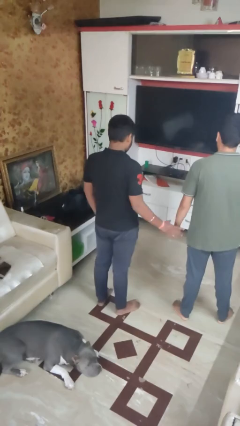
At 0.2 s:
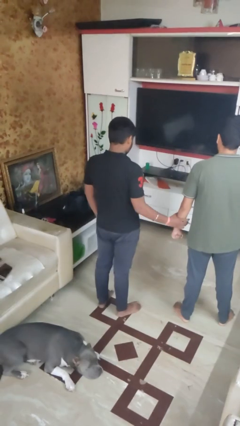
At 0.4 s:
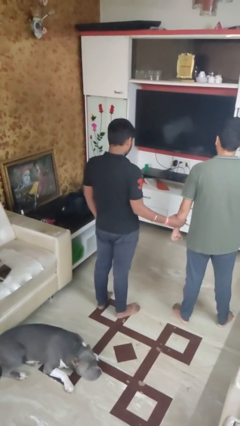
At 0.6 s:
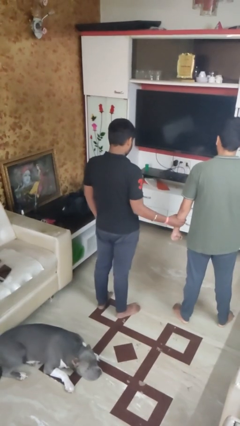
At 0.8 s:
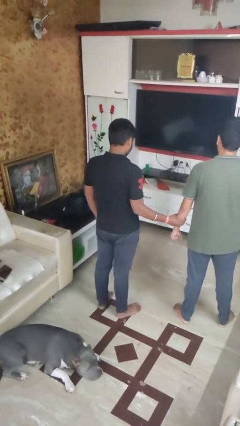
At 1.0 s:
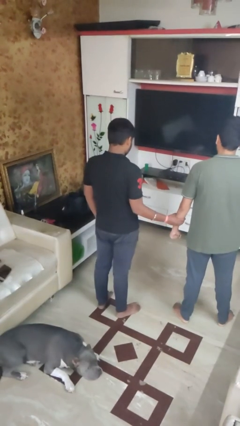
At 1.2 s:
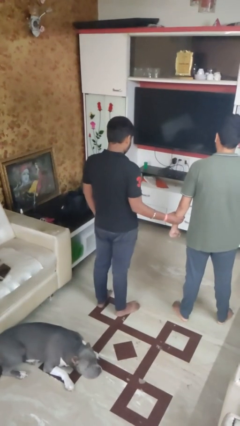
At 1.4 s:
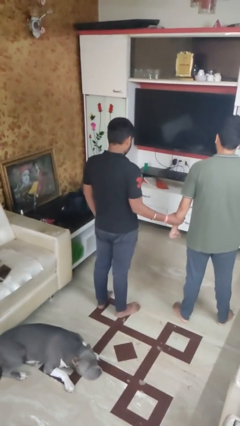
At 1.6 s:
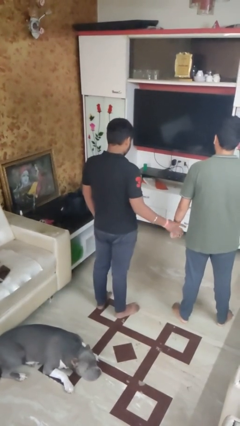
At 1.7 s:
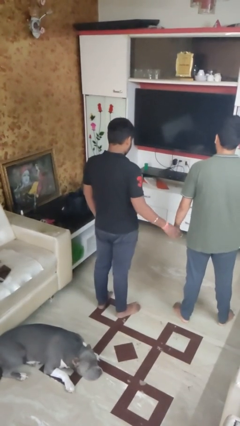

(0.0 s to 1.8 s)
person grabs person by forearm

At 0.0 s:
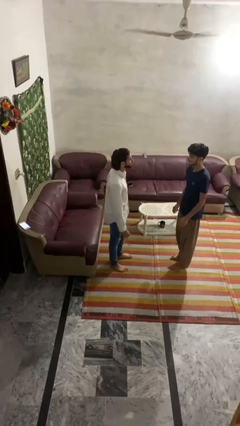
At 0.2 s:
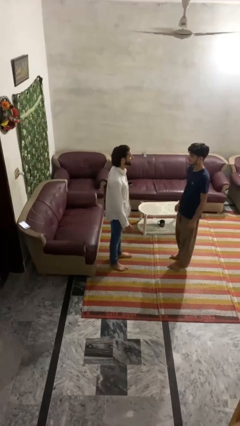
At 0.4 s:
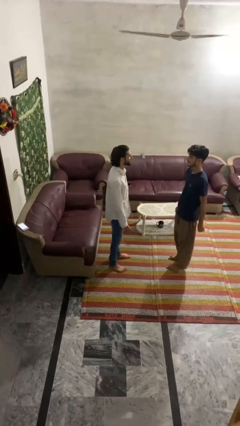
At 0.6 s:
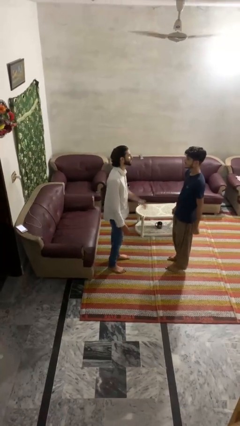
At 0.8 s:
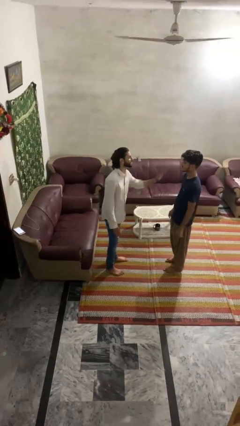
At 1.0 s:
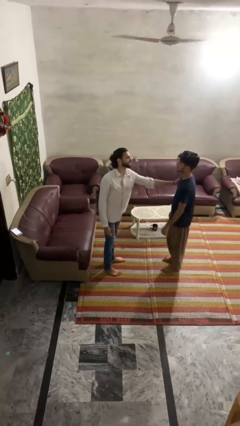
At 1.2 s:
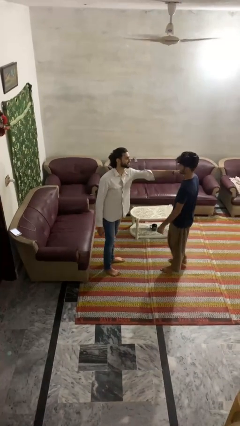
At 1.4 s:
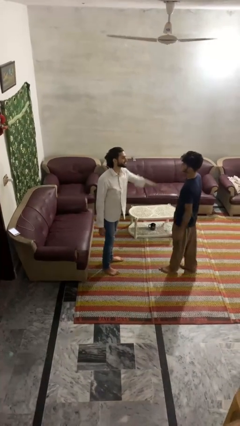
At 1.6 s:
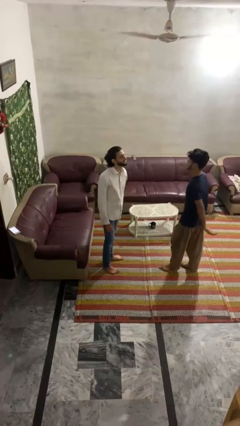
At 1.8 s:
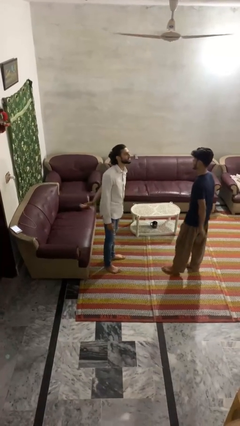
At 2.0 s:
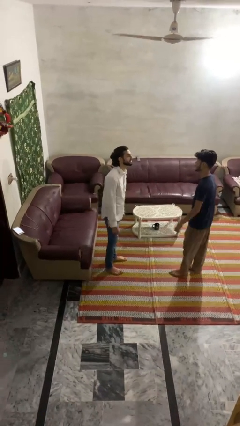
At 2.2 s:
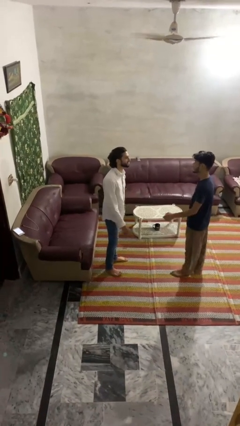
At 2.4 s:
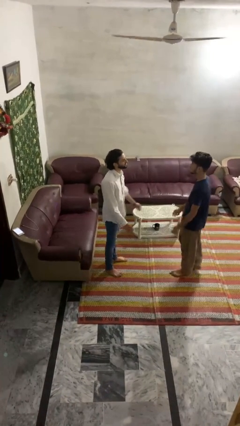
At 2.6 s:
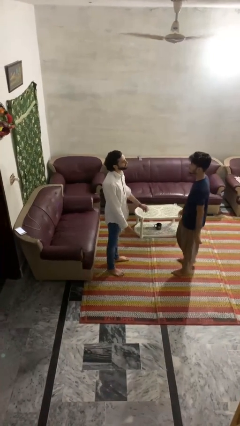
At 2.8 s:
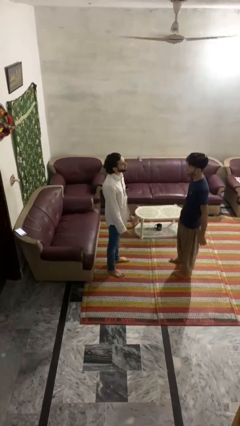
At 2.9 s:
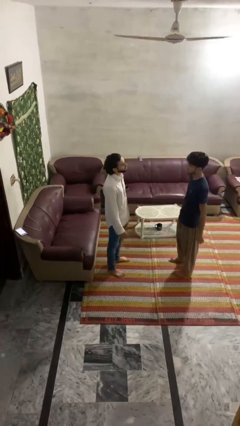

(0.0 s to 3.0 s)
person shoves person

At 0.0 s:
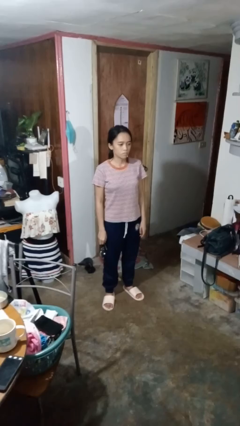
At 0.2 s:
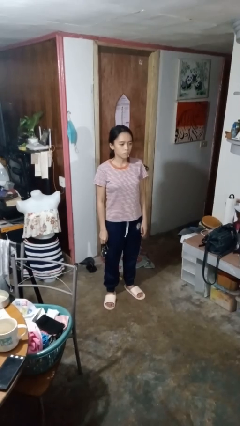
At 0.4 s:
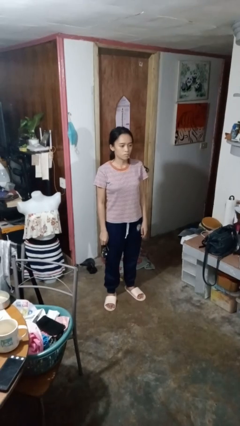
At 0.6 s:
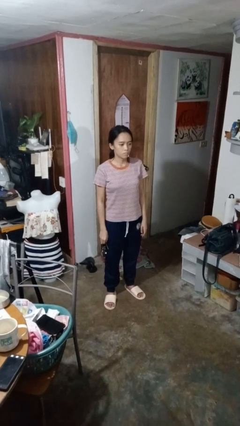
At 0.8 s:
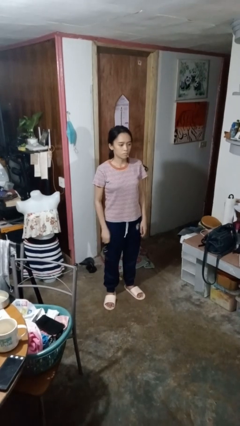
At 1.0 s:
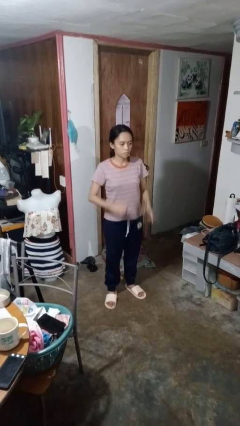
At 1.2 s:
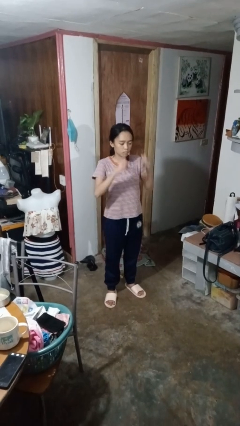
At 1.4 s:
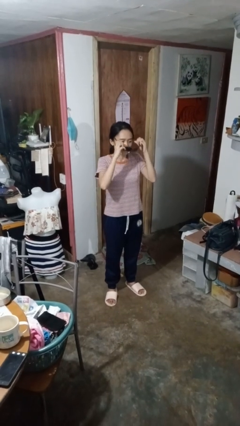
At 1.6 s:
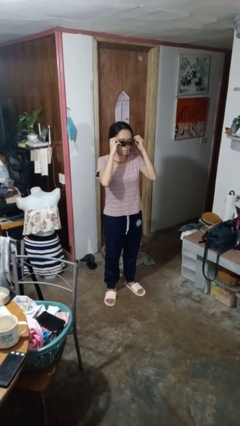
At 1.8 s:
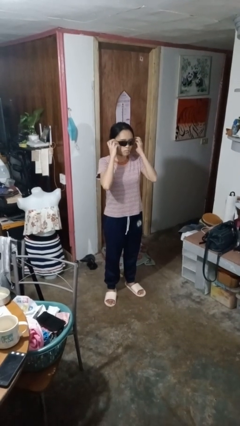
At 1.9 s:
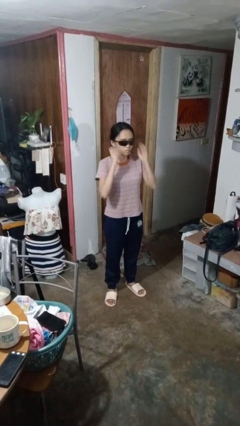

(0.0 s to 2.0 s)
person puts on sunglasses

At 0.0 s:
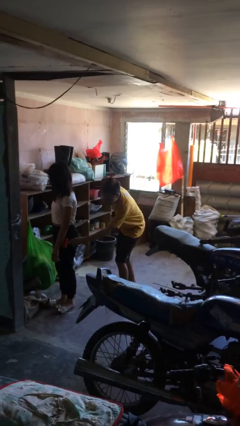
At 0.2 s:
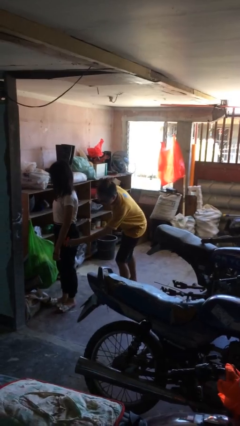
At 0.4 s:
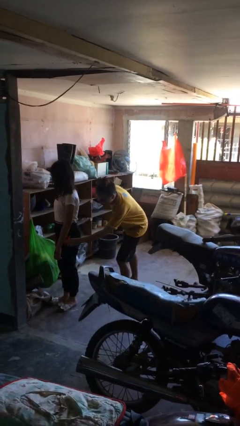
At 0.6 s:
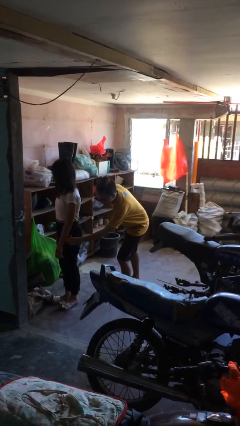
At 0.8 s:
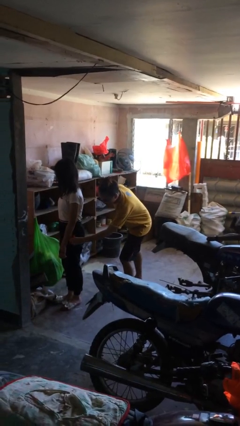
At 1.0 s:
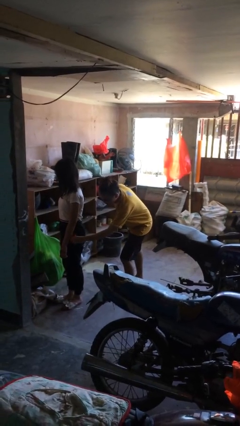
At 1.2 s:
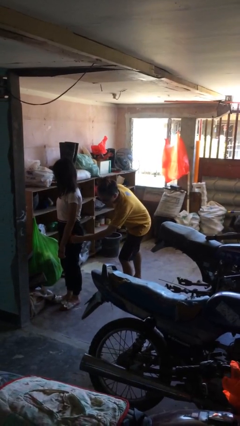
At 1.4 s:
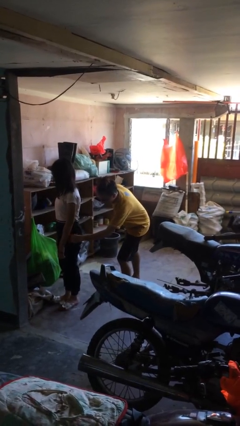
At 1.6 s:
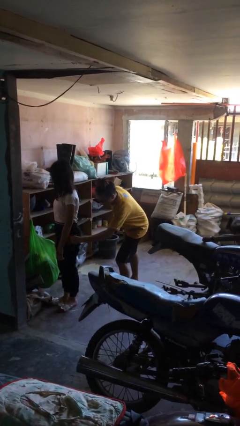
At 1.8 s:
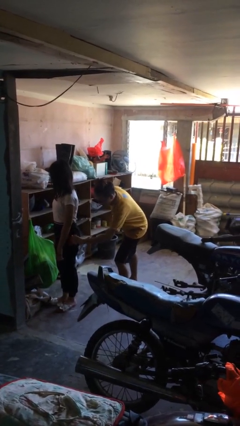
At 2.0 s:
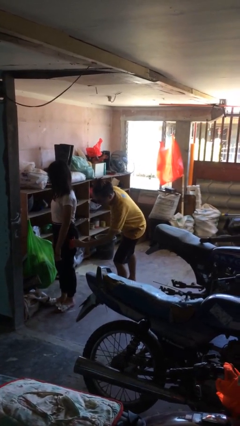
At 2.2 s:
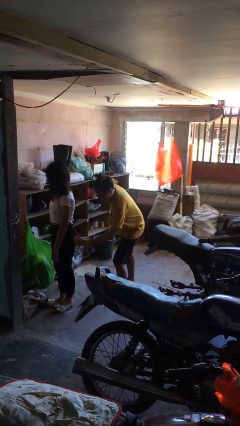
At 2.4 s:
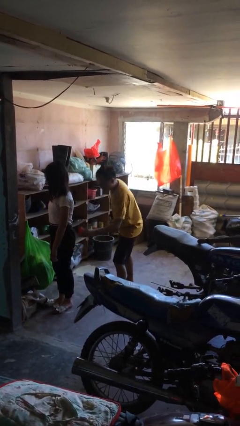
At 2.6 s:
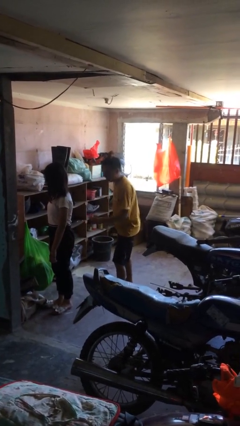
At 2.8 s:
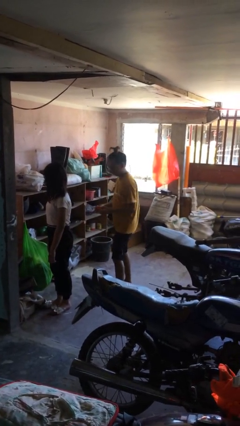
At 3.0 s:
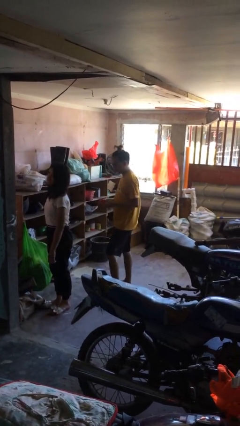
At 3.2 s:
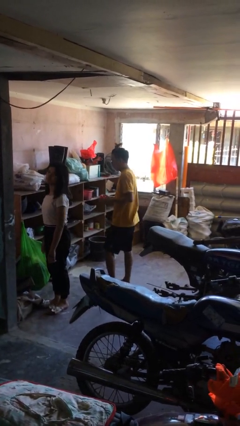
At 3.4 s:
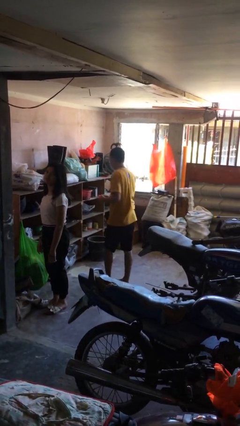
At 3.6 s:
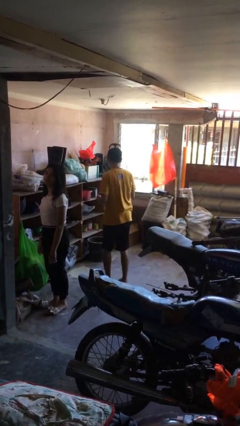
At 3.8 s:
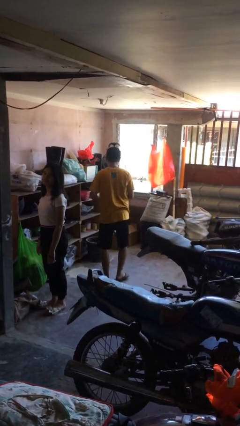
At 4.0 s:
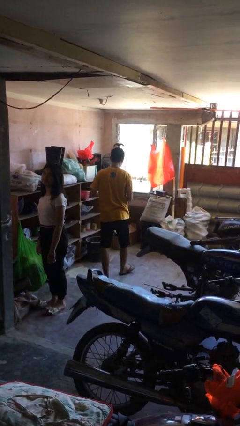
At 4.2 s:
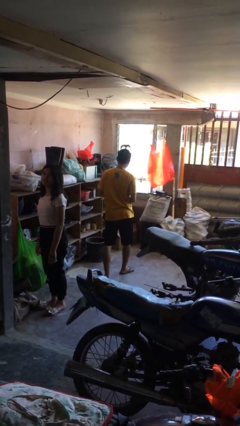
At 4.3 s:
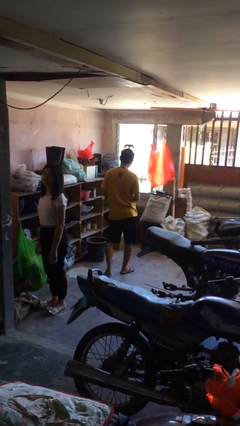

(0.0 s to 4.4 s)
person steals object from person

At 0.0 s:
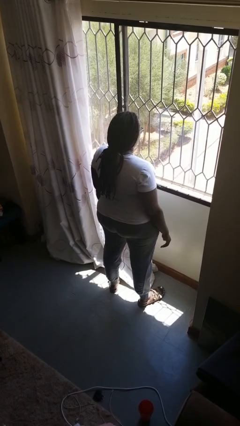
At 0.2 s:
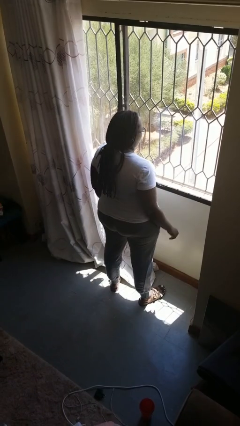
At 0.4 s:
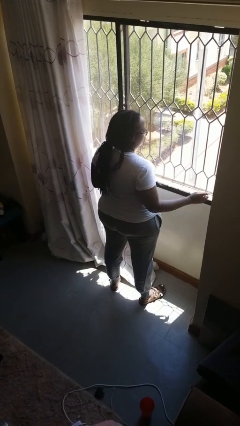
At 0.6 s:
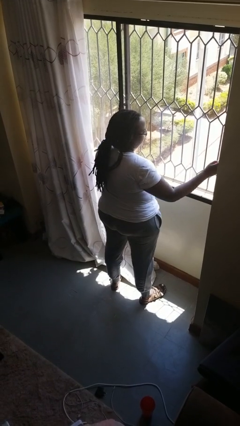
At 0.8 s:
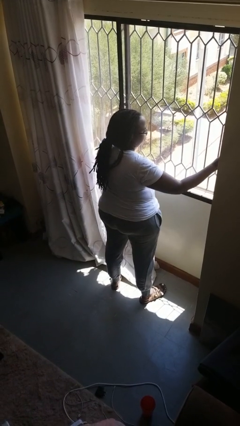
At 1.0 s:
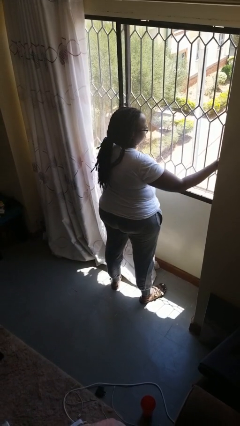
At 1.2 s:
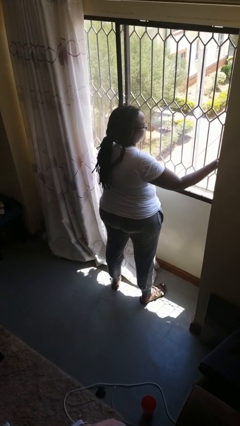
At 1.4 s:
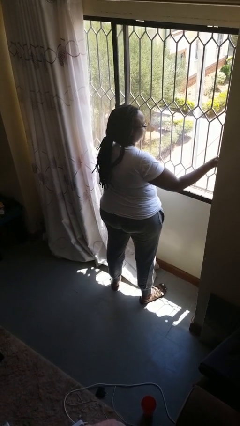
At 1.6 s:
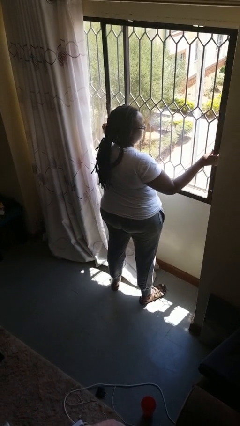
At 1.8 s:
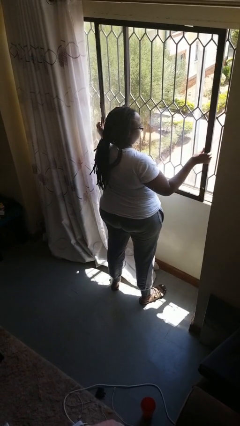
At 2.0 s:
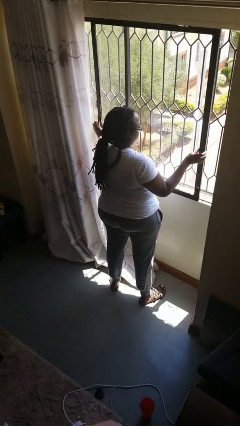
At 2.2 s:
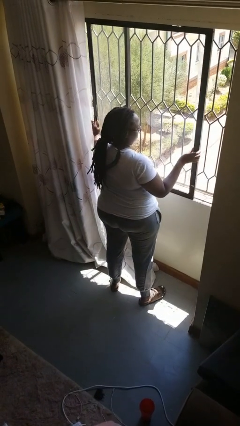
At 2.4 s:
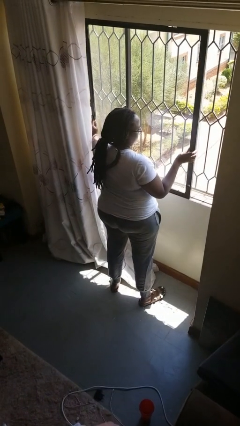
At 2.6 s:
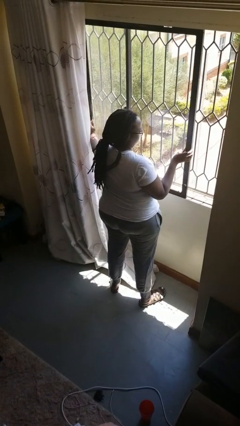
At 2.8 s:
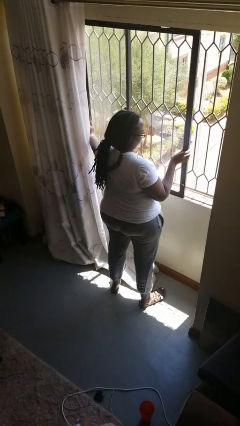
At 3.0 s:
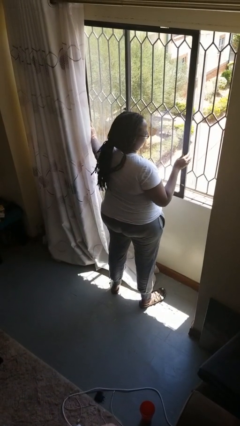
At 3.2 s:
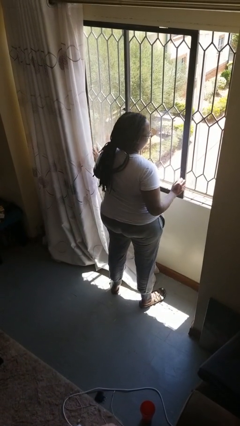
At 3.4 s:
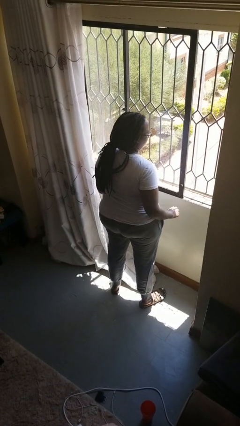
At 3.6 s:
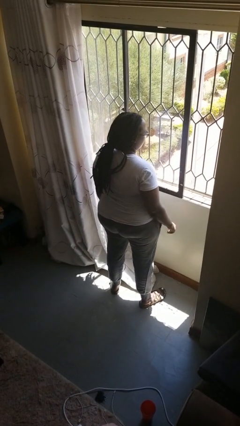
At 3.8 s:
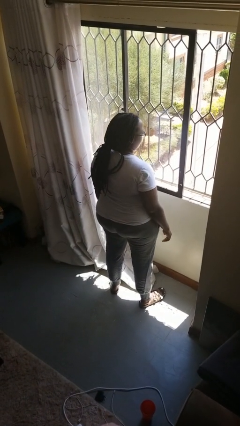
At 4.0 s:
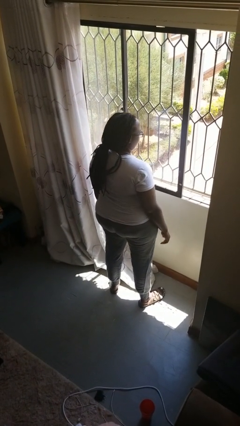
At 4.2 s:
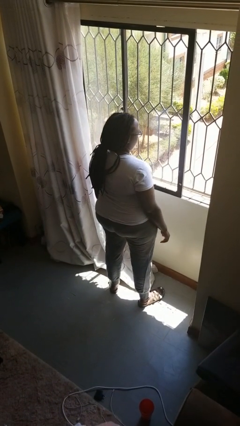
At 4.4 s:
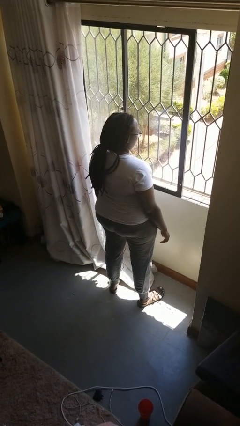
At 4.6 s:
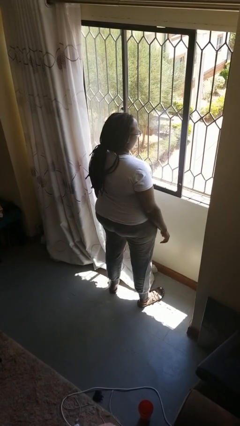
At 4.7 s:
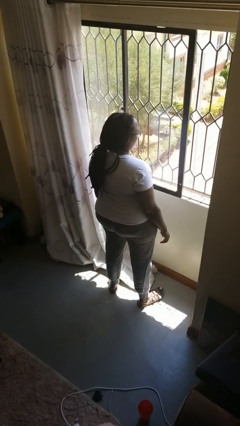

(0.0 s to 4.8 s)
person opens home window

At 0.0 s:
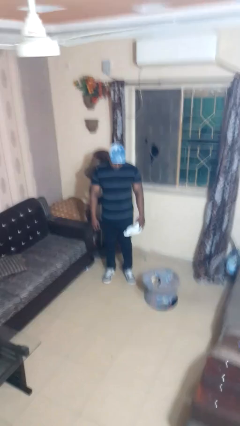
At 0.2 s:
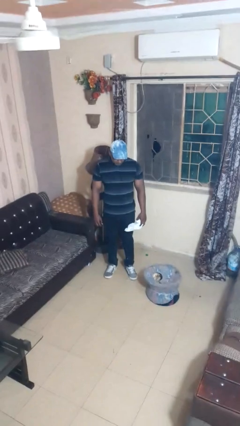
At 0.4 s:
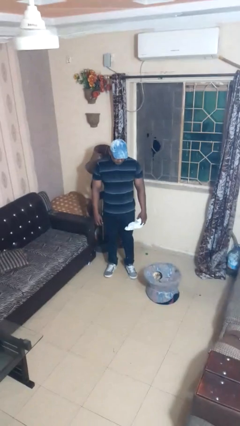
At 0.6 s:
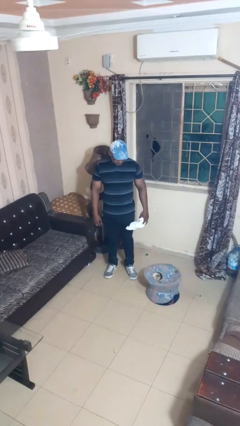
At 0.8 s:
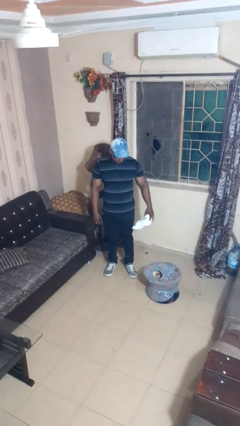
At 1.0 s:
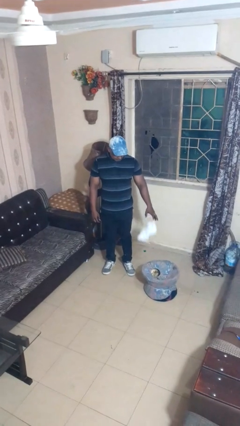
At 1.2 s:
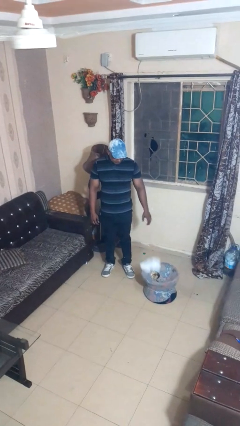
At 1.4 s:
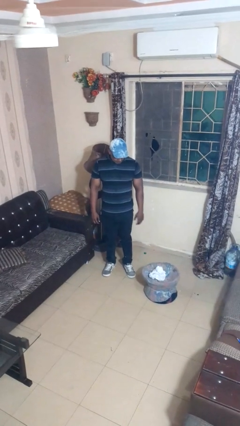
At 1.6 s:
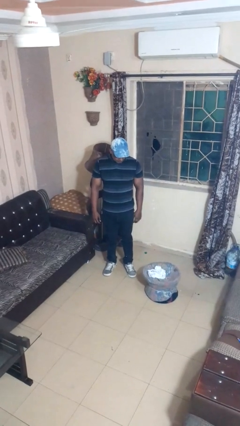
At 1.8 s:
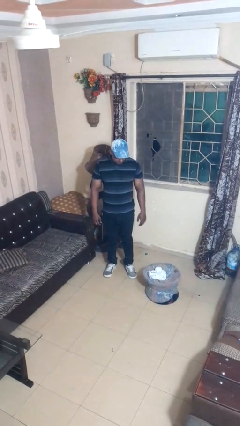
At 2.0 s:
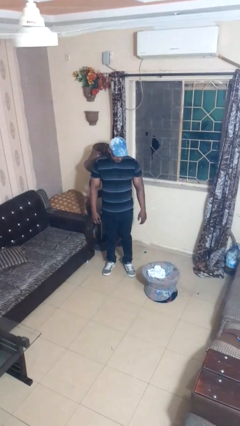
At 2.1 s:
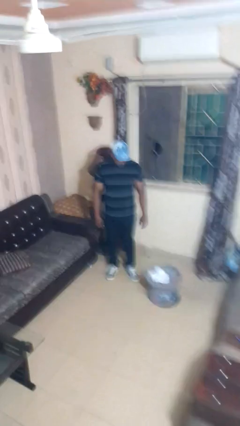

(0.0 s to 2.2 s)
person puts object into basket
